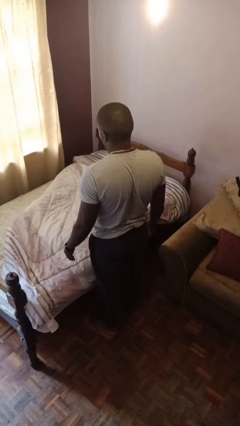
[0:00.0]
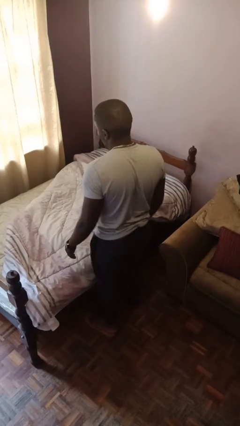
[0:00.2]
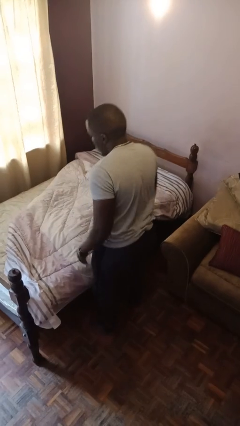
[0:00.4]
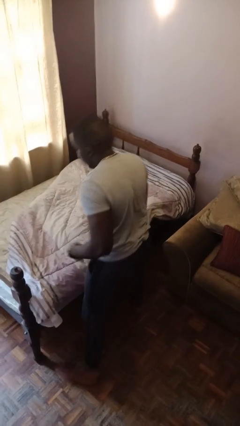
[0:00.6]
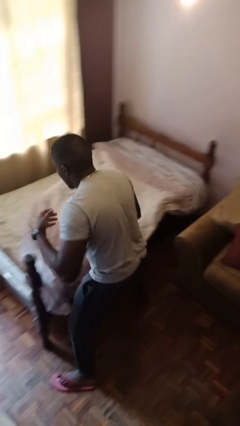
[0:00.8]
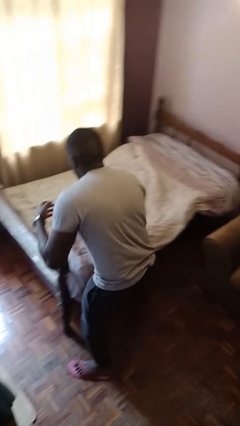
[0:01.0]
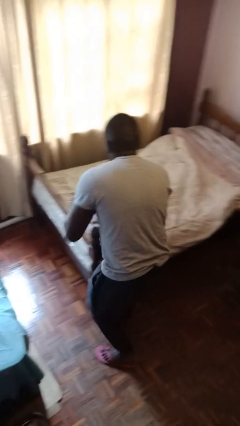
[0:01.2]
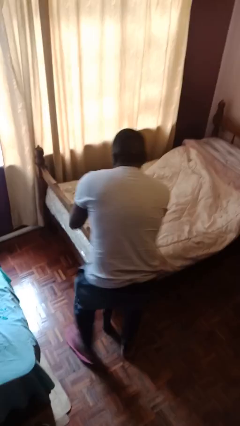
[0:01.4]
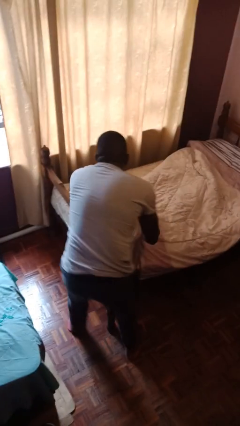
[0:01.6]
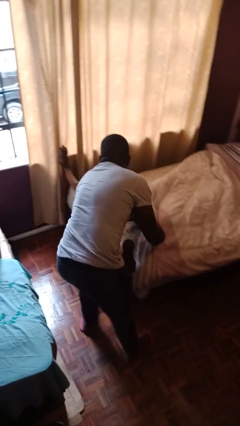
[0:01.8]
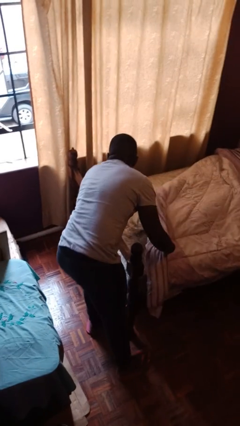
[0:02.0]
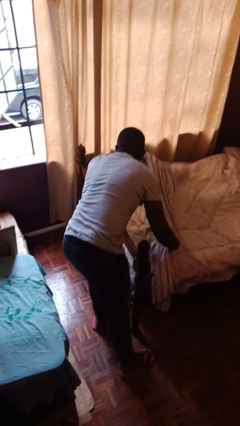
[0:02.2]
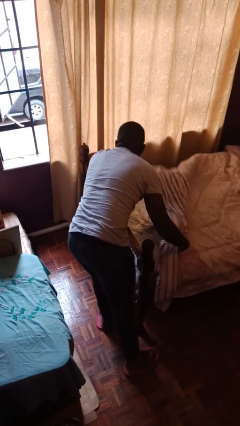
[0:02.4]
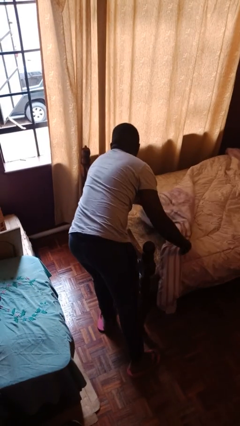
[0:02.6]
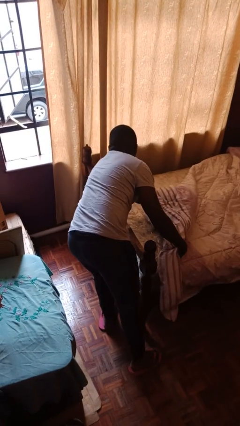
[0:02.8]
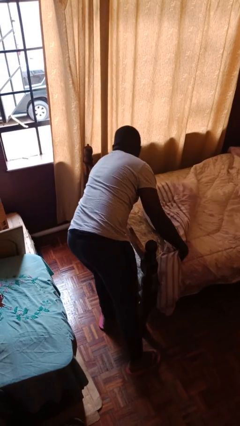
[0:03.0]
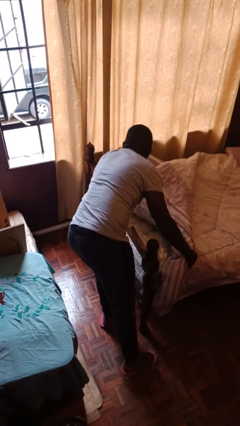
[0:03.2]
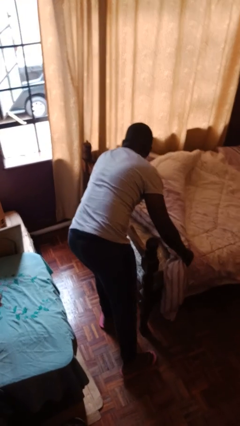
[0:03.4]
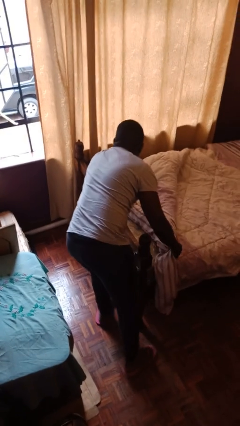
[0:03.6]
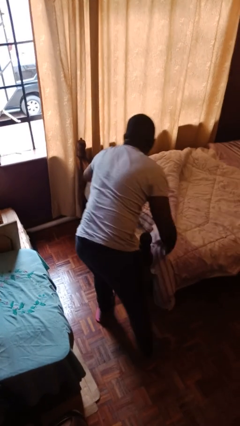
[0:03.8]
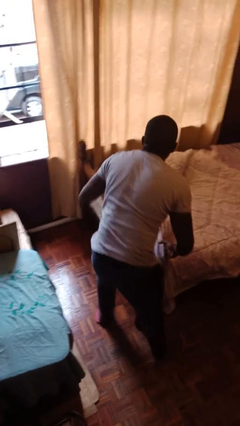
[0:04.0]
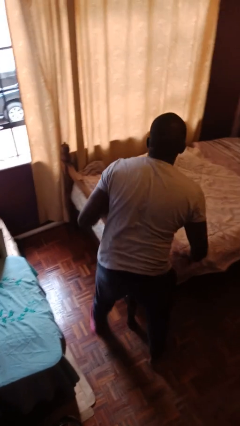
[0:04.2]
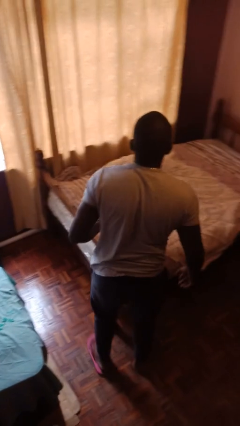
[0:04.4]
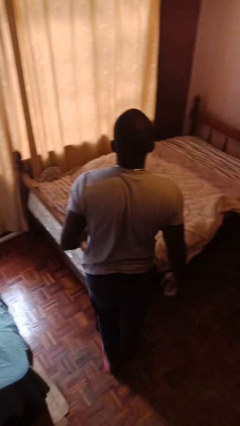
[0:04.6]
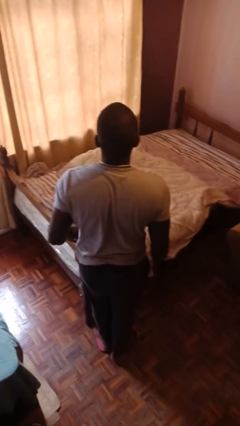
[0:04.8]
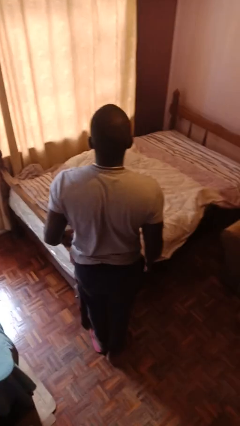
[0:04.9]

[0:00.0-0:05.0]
person makes bed

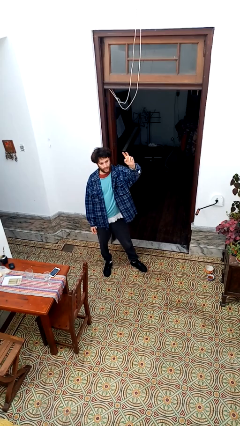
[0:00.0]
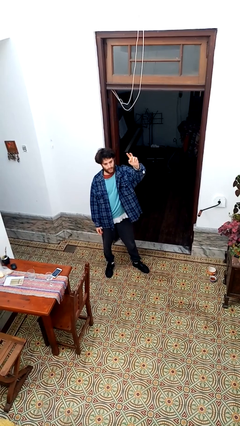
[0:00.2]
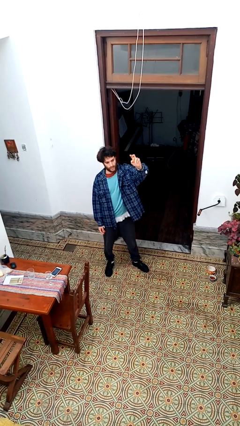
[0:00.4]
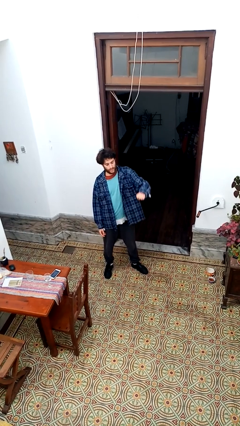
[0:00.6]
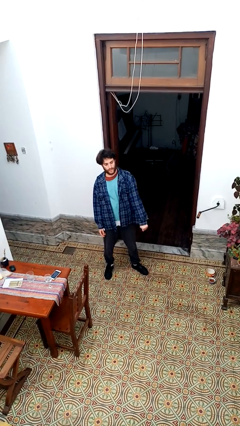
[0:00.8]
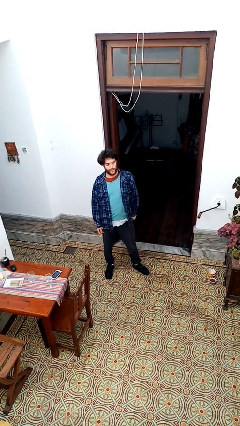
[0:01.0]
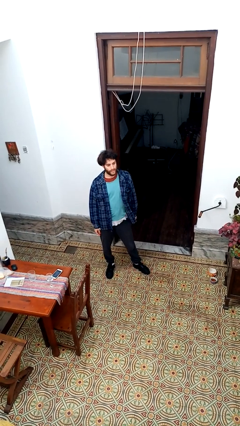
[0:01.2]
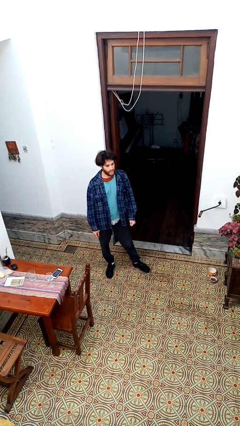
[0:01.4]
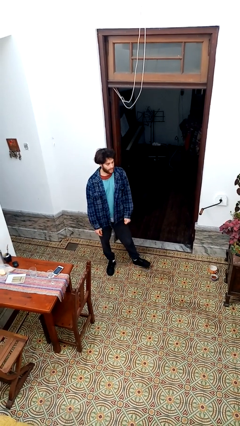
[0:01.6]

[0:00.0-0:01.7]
person gestures lower hand

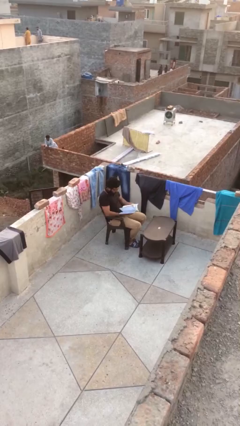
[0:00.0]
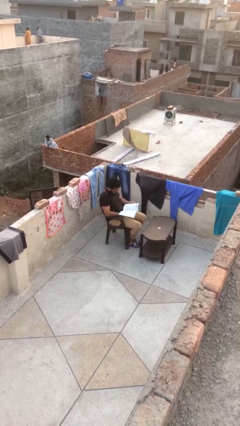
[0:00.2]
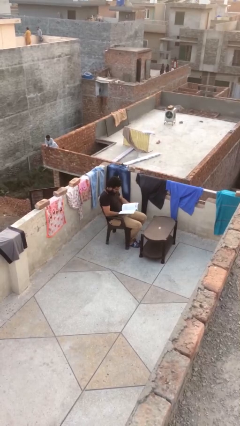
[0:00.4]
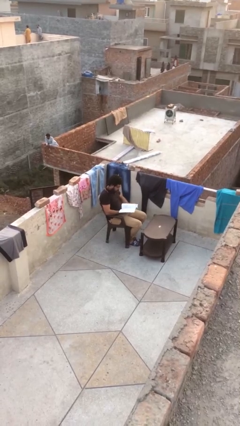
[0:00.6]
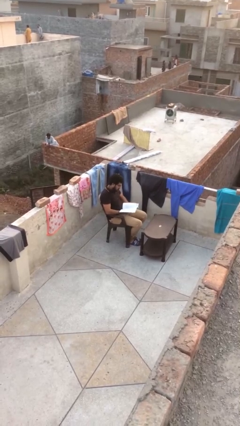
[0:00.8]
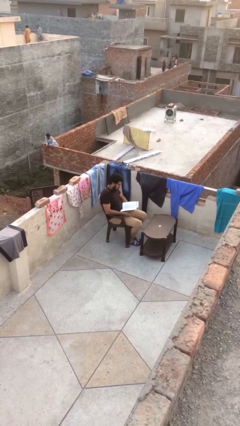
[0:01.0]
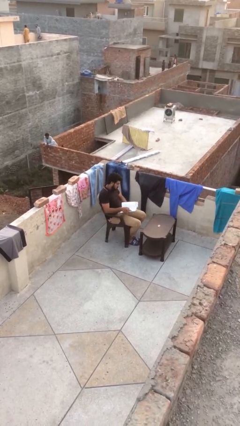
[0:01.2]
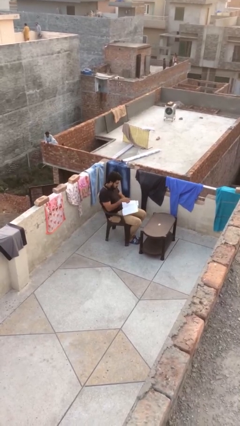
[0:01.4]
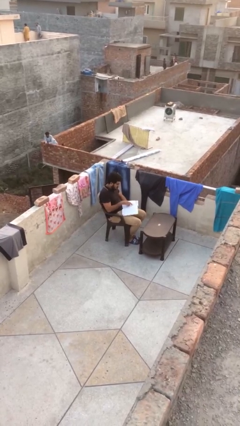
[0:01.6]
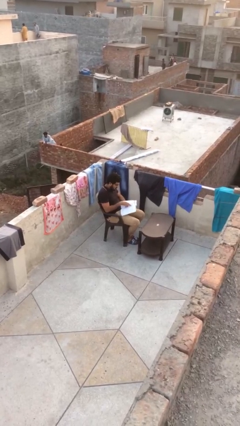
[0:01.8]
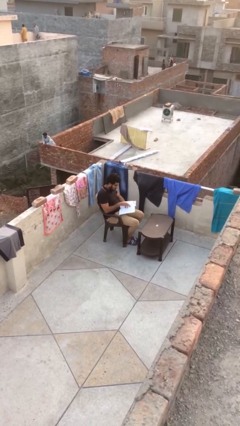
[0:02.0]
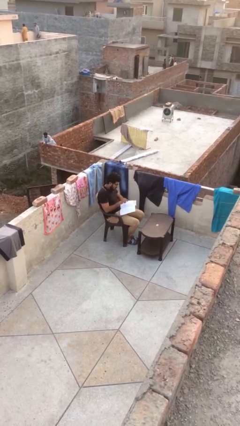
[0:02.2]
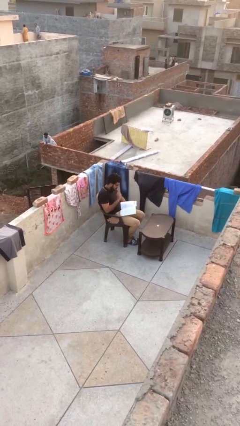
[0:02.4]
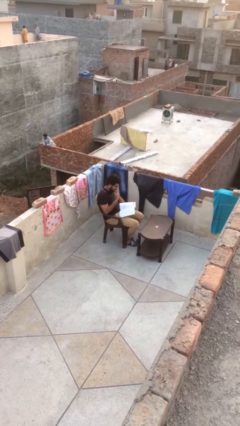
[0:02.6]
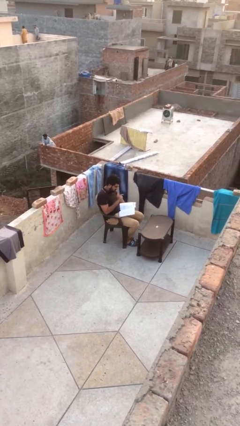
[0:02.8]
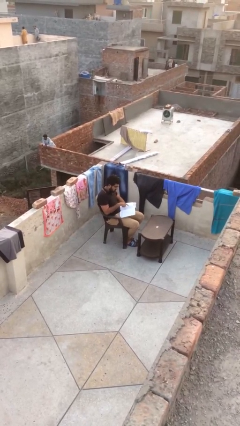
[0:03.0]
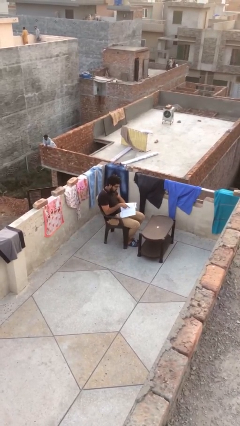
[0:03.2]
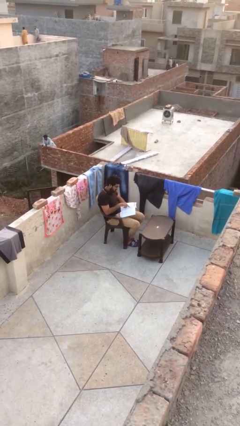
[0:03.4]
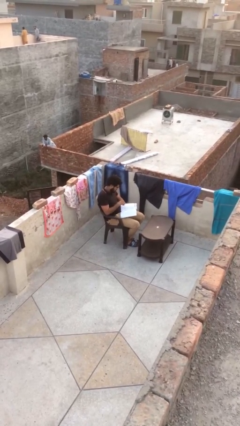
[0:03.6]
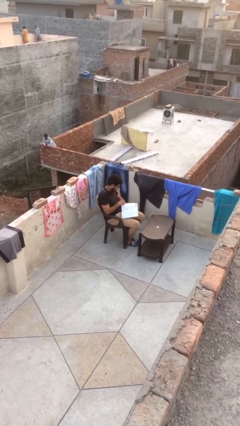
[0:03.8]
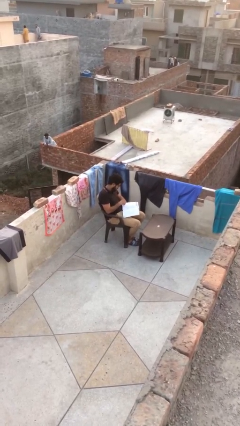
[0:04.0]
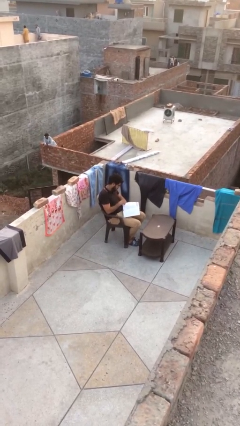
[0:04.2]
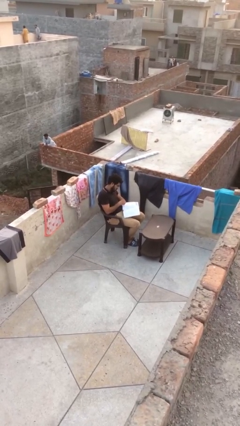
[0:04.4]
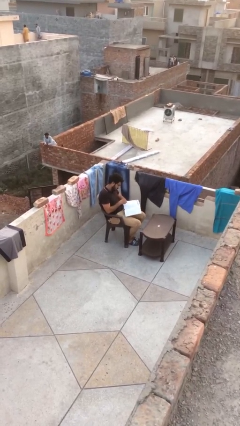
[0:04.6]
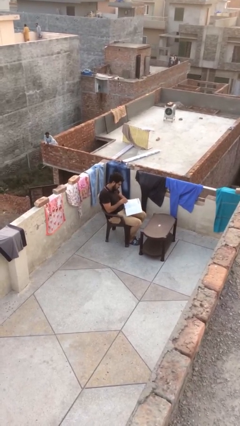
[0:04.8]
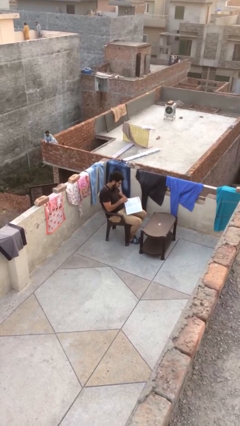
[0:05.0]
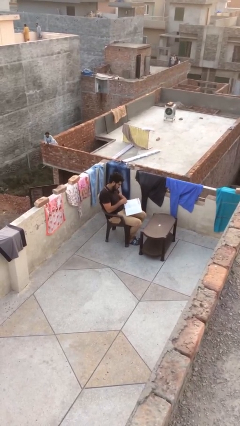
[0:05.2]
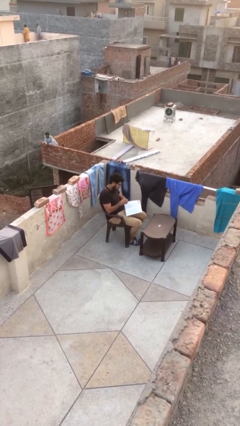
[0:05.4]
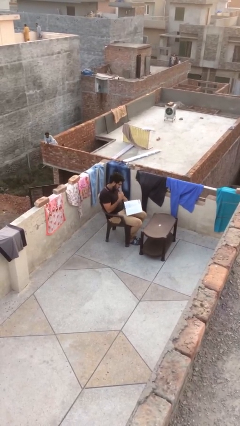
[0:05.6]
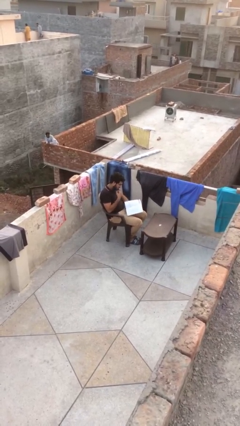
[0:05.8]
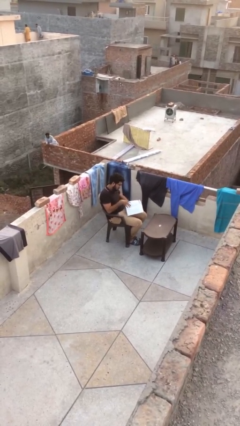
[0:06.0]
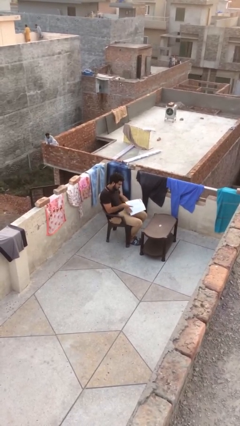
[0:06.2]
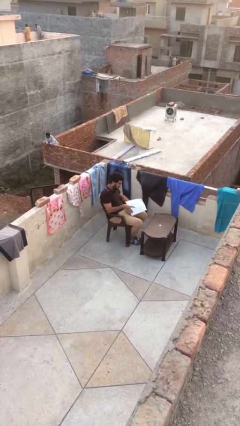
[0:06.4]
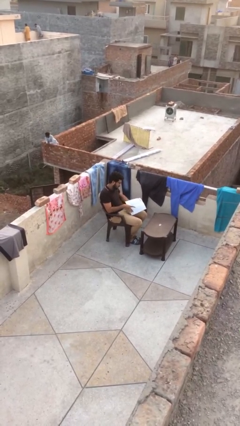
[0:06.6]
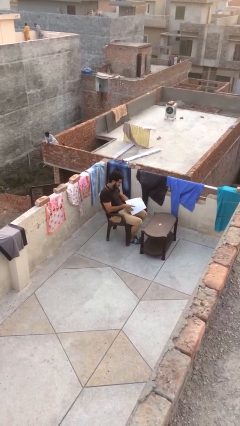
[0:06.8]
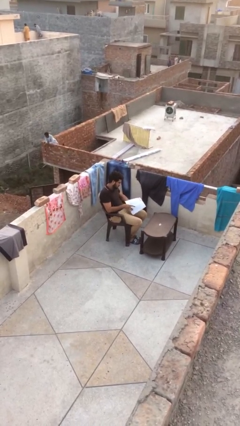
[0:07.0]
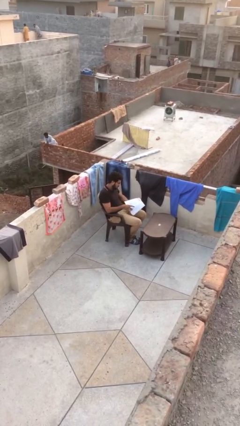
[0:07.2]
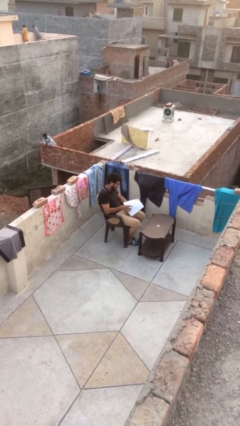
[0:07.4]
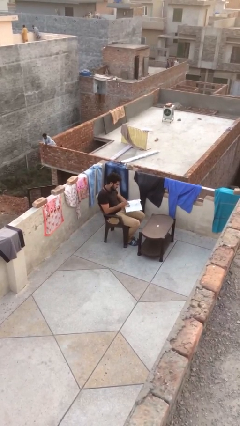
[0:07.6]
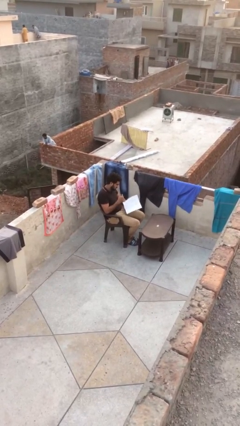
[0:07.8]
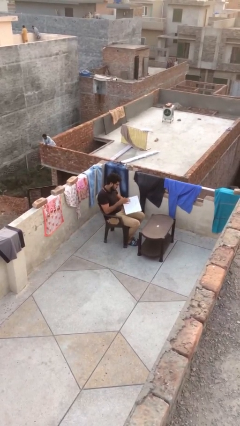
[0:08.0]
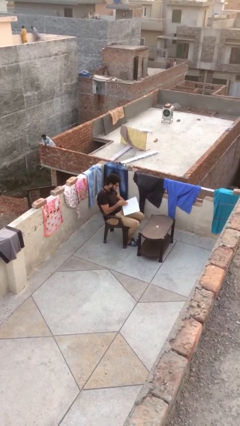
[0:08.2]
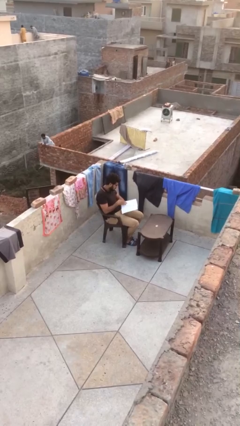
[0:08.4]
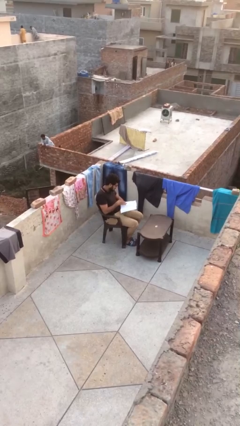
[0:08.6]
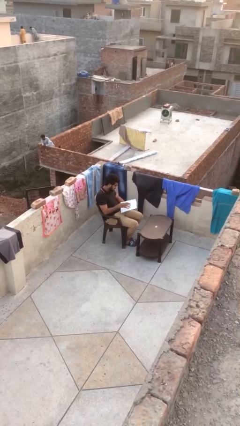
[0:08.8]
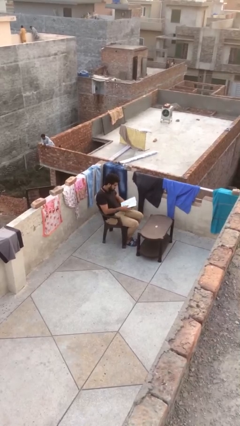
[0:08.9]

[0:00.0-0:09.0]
person reads document

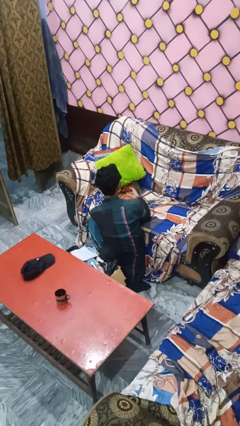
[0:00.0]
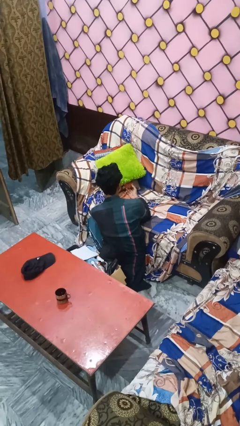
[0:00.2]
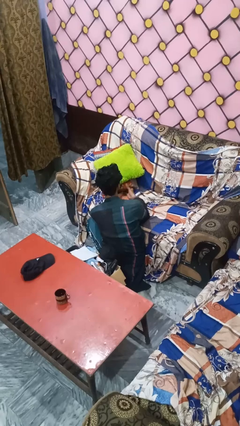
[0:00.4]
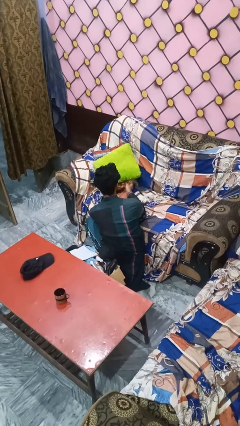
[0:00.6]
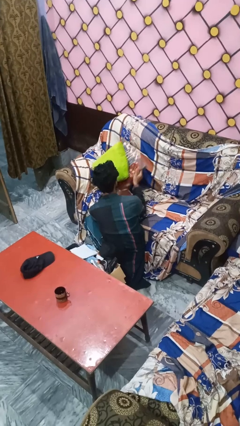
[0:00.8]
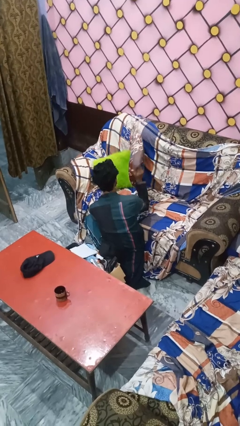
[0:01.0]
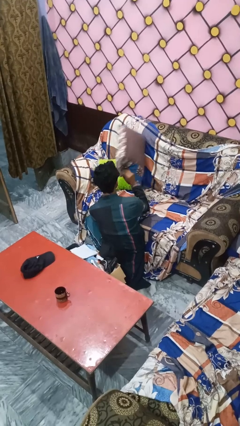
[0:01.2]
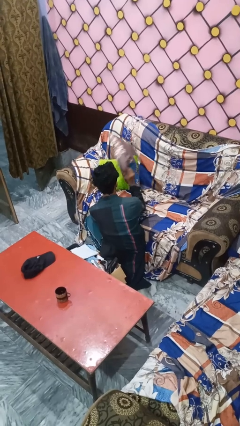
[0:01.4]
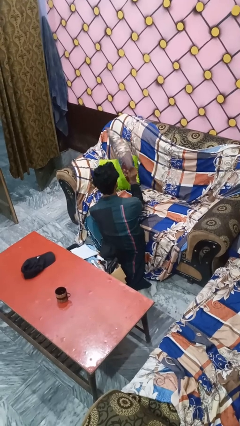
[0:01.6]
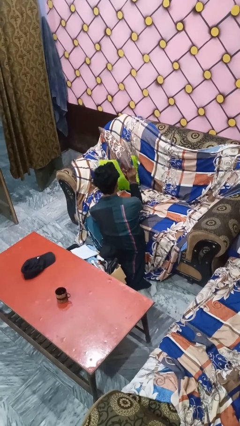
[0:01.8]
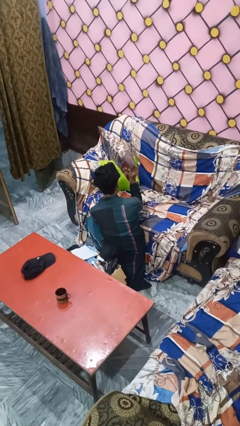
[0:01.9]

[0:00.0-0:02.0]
person searches in couch
